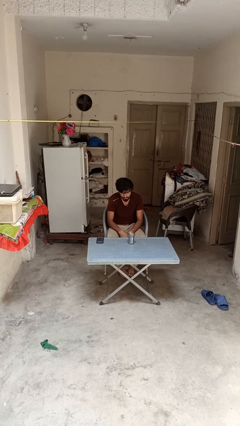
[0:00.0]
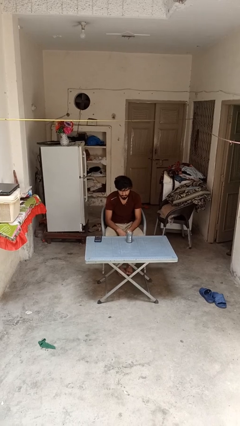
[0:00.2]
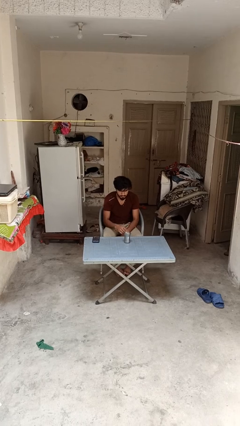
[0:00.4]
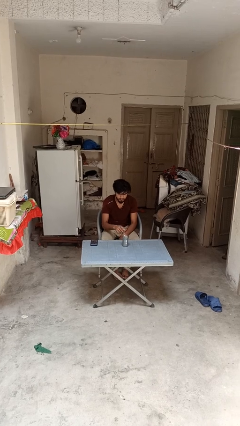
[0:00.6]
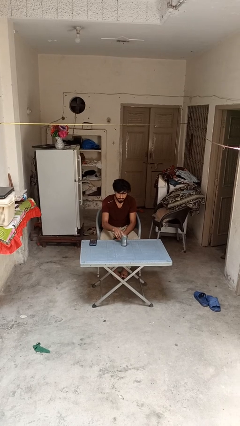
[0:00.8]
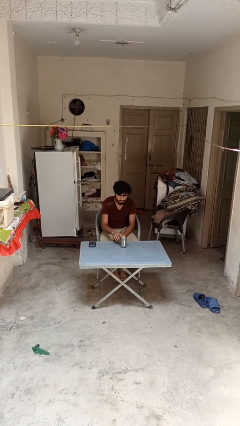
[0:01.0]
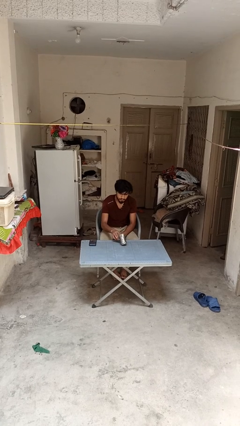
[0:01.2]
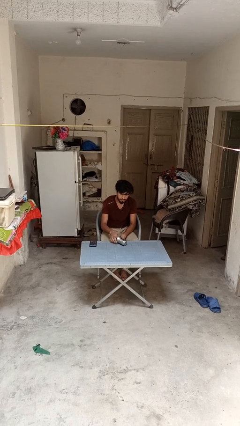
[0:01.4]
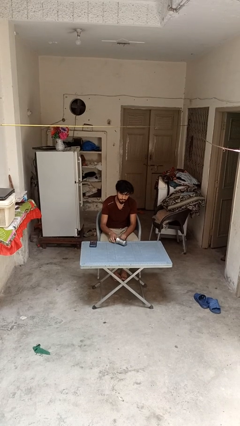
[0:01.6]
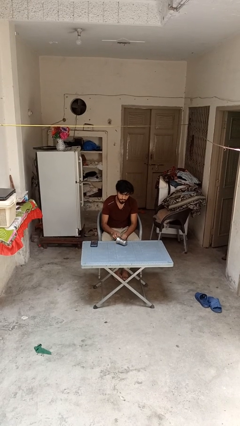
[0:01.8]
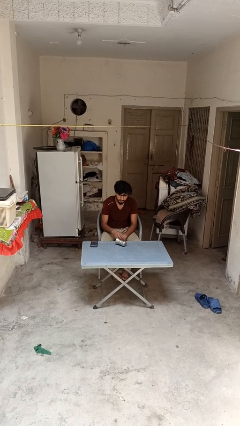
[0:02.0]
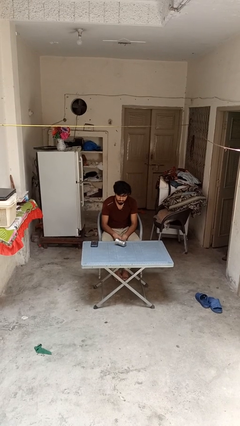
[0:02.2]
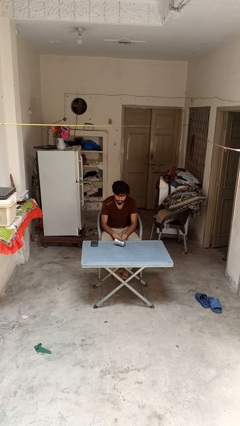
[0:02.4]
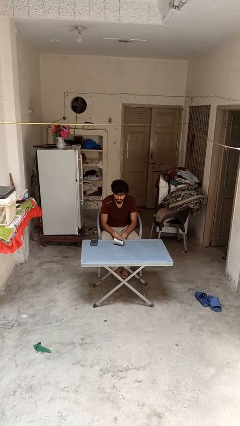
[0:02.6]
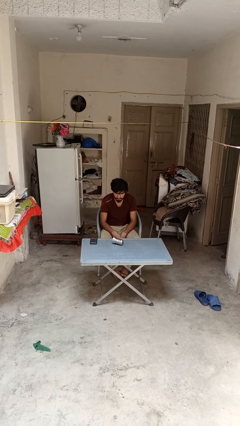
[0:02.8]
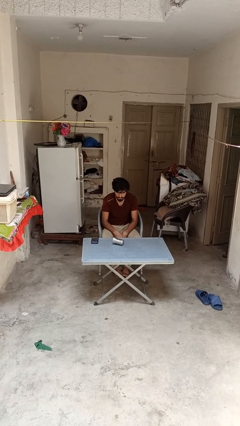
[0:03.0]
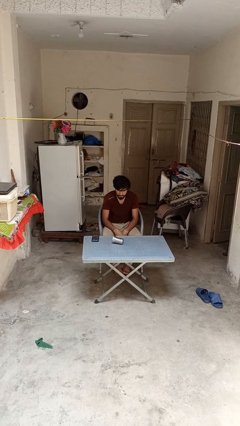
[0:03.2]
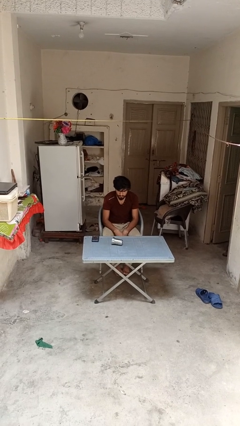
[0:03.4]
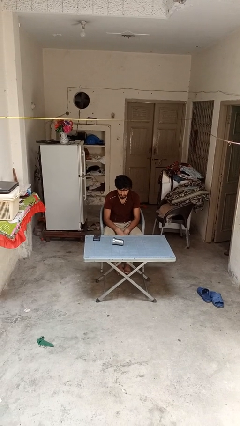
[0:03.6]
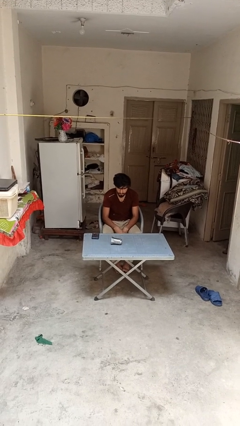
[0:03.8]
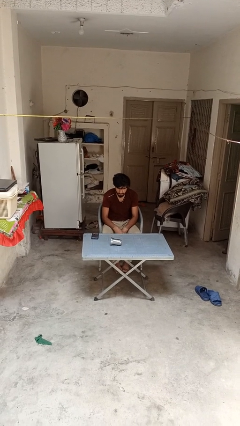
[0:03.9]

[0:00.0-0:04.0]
person knocks over glass

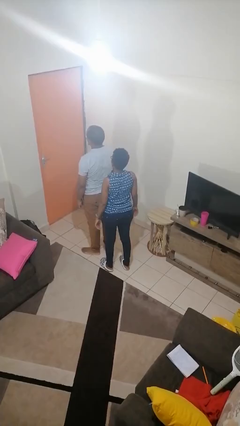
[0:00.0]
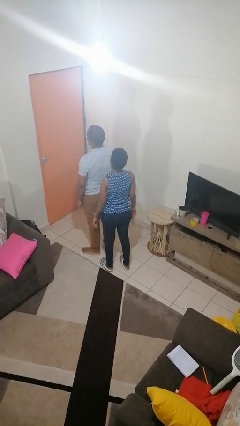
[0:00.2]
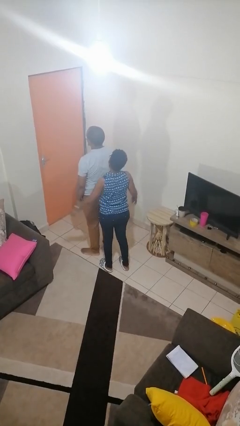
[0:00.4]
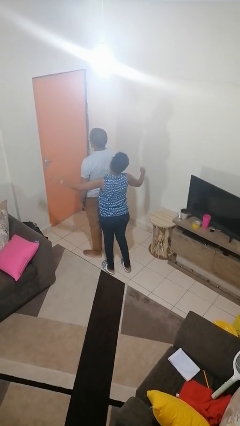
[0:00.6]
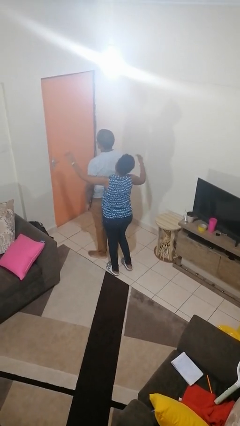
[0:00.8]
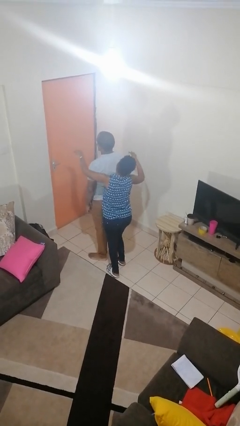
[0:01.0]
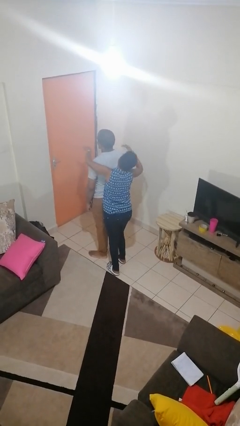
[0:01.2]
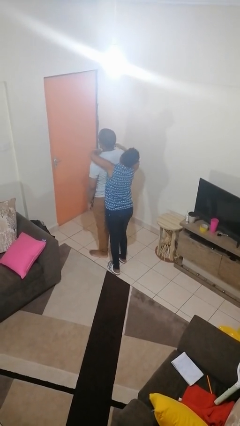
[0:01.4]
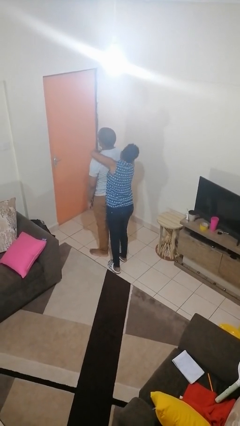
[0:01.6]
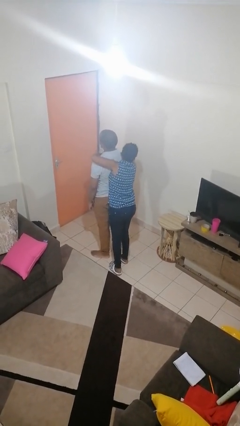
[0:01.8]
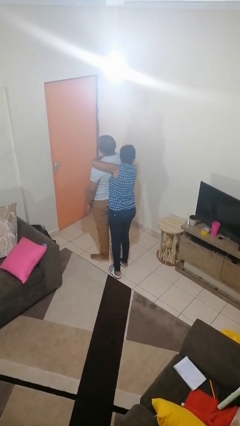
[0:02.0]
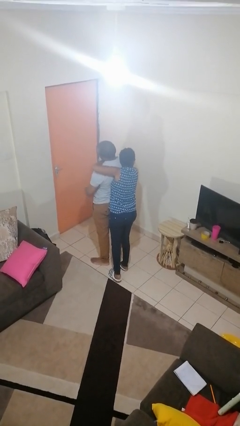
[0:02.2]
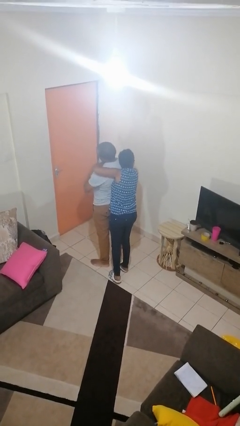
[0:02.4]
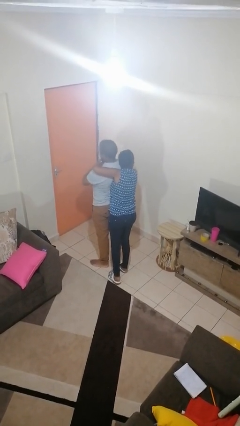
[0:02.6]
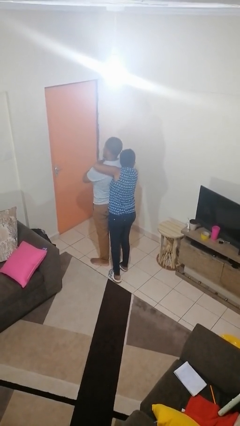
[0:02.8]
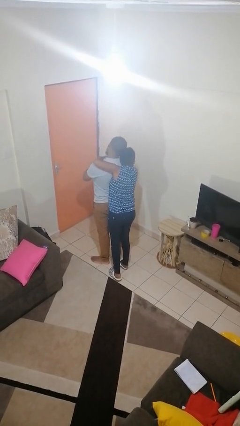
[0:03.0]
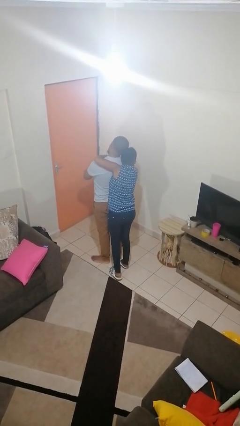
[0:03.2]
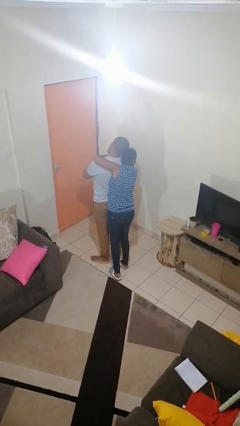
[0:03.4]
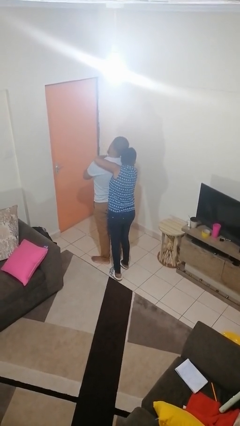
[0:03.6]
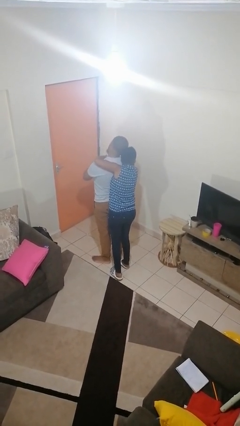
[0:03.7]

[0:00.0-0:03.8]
person hugs person from behind

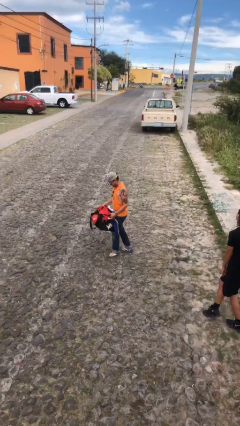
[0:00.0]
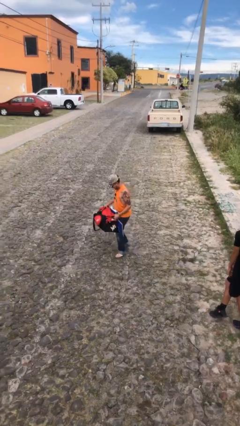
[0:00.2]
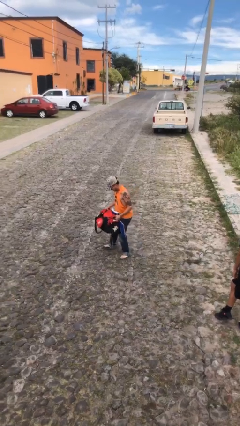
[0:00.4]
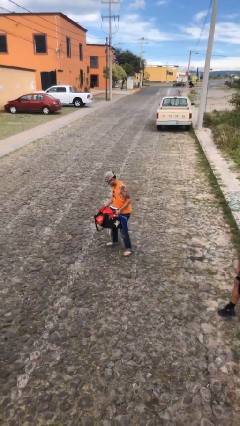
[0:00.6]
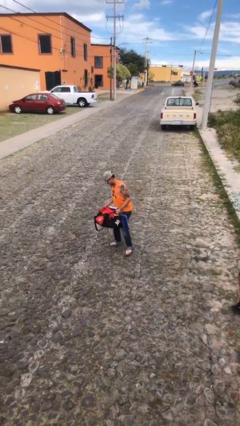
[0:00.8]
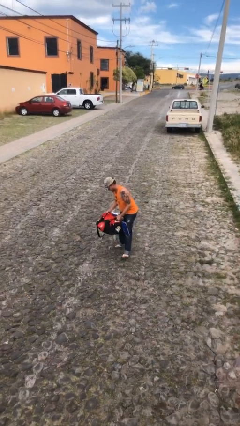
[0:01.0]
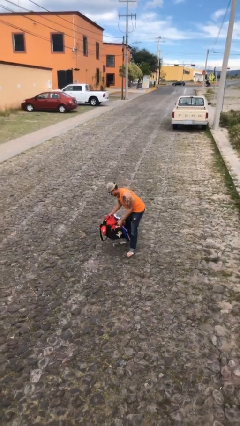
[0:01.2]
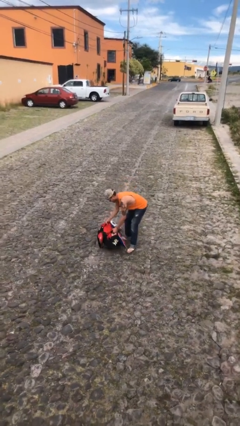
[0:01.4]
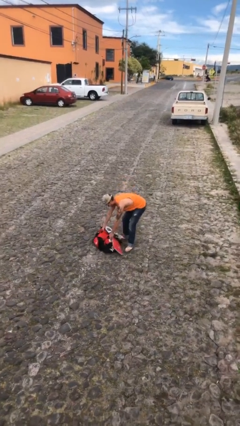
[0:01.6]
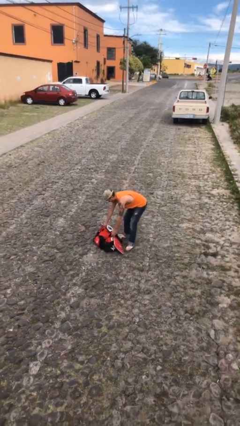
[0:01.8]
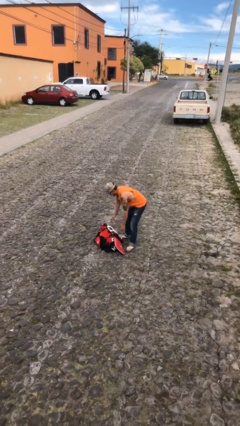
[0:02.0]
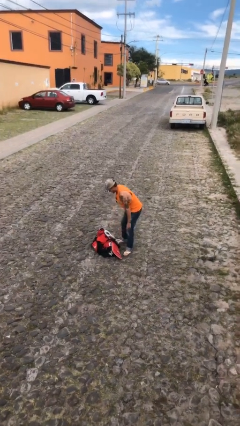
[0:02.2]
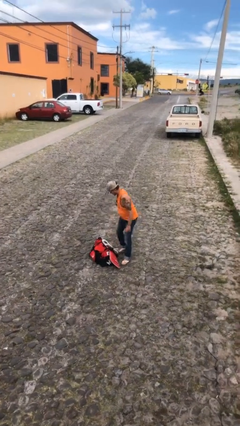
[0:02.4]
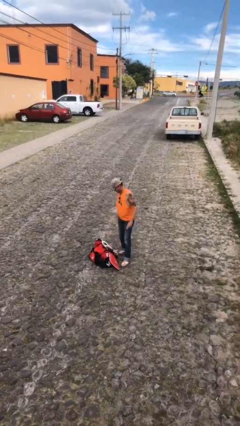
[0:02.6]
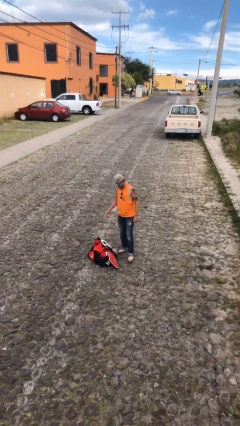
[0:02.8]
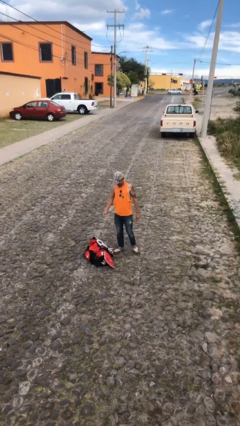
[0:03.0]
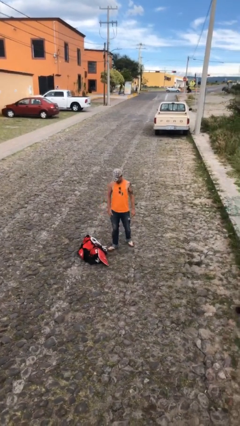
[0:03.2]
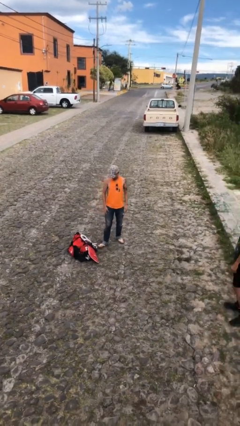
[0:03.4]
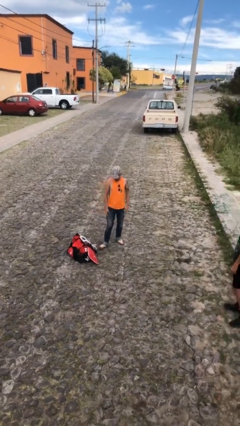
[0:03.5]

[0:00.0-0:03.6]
person puts down object on floor

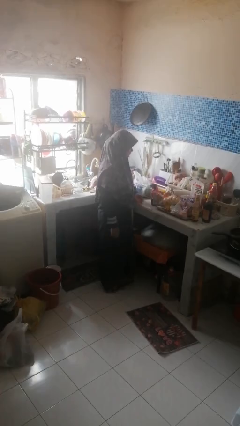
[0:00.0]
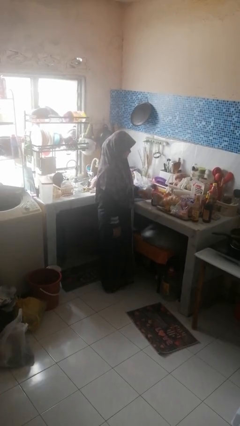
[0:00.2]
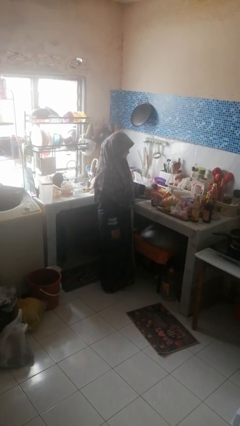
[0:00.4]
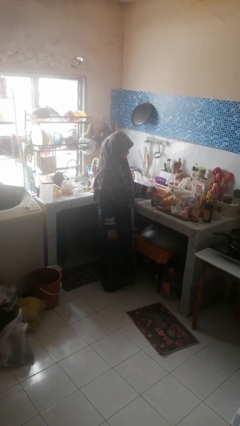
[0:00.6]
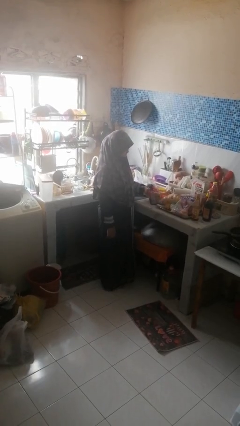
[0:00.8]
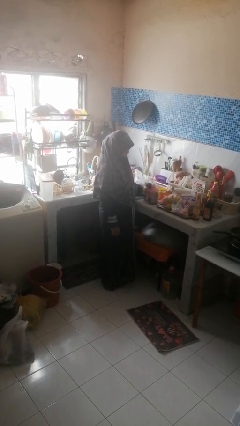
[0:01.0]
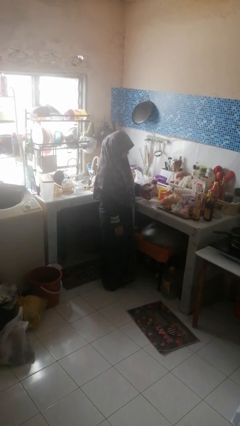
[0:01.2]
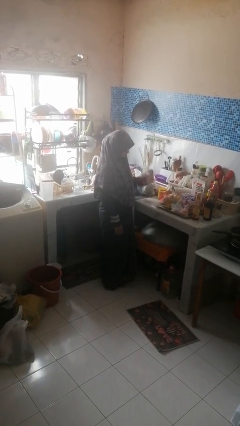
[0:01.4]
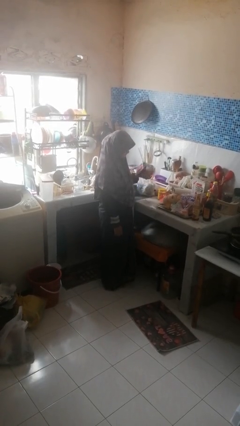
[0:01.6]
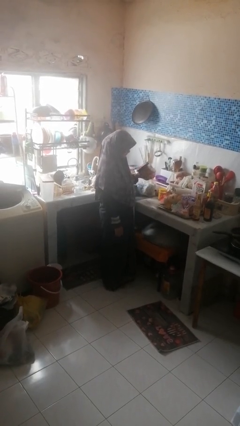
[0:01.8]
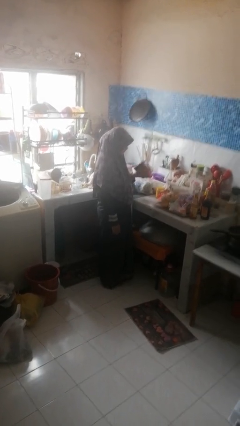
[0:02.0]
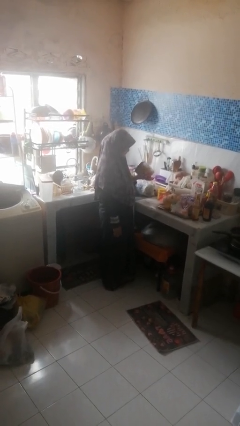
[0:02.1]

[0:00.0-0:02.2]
person picks up object from countertop

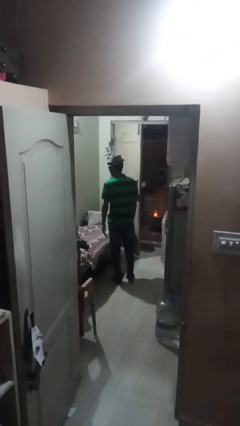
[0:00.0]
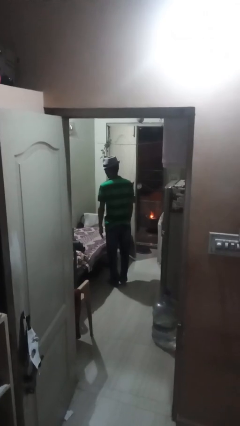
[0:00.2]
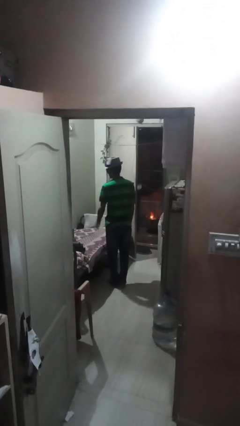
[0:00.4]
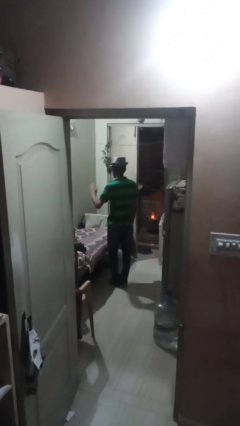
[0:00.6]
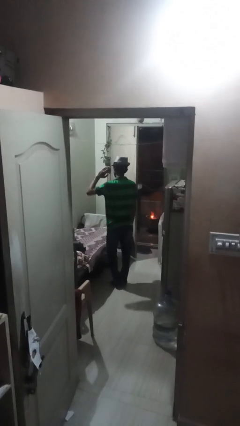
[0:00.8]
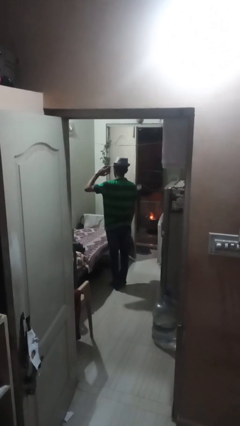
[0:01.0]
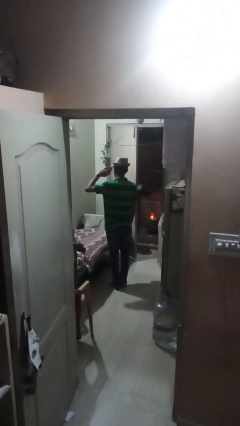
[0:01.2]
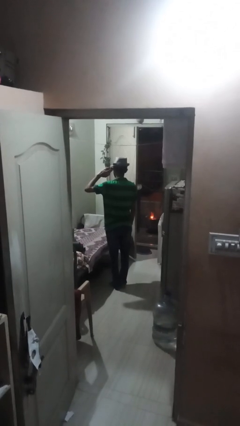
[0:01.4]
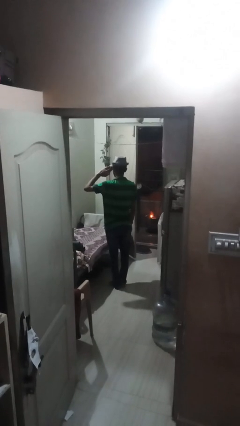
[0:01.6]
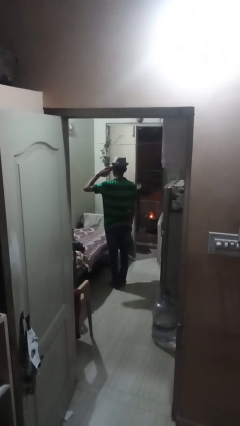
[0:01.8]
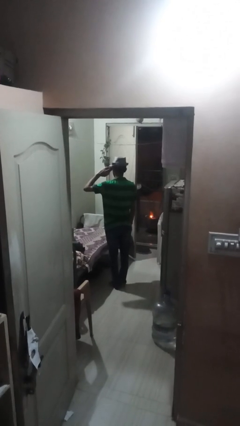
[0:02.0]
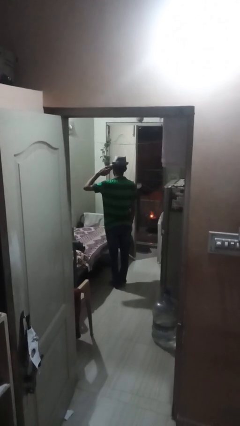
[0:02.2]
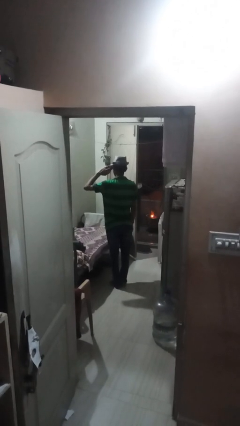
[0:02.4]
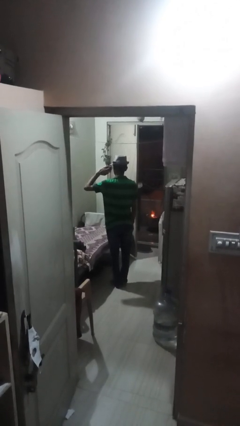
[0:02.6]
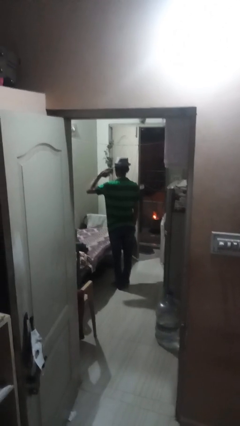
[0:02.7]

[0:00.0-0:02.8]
person salutes

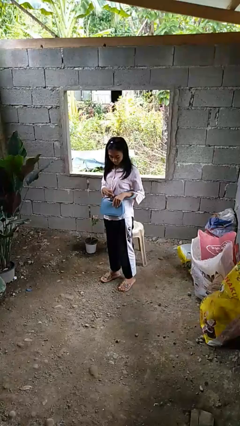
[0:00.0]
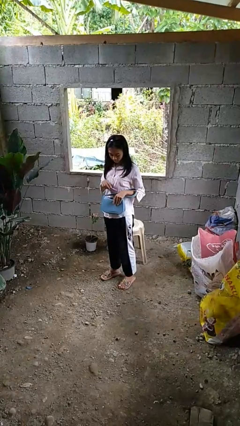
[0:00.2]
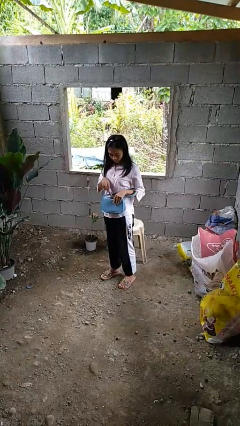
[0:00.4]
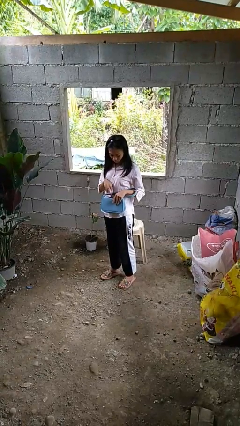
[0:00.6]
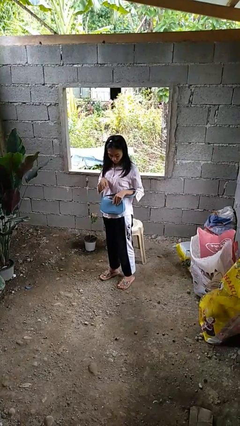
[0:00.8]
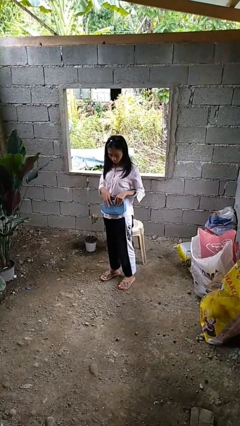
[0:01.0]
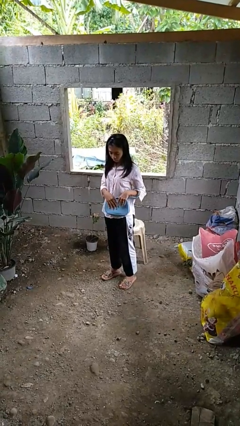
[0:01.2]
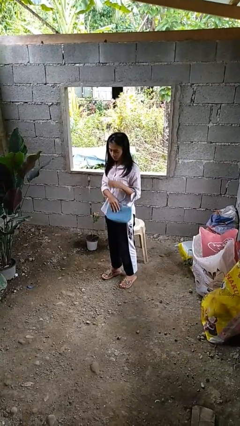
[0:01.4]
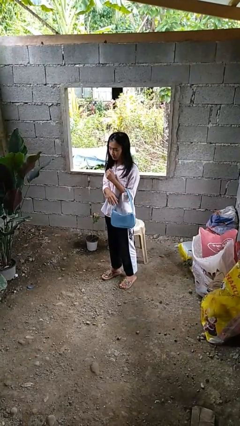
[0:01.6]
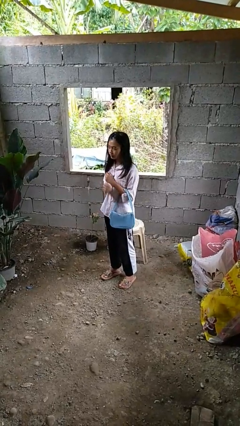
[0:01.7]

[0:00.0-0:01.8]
person puts object into purse
